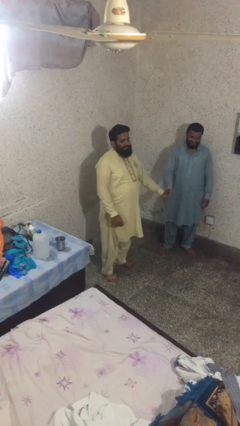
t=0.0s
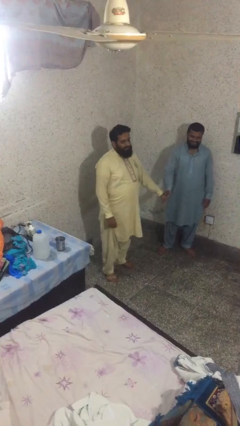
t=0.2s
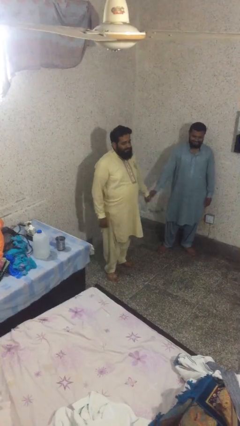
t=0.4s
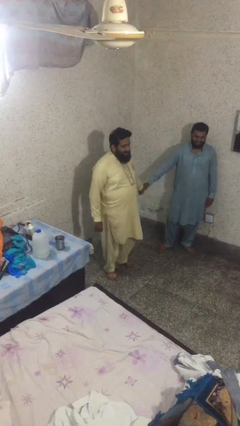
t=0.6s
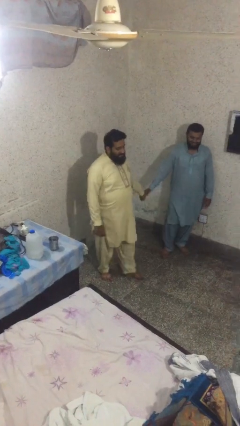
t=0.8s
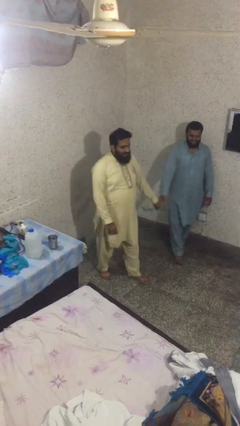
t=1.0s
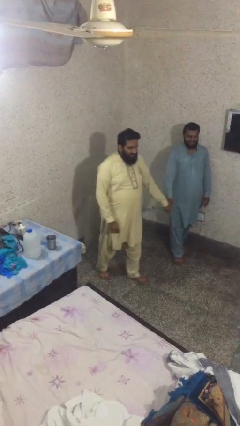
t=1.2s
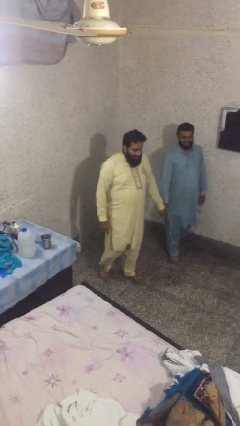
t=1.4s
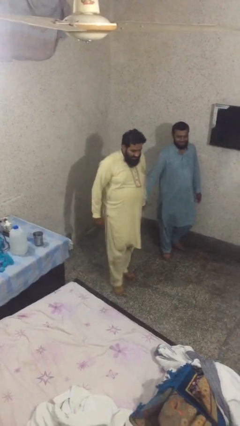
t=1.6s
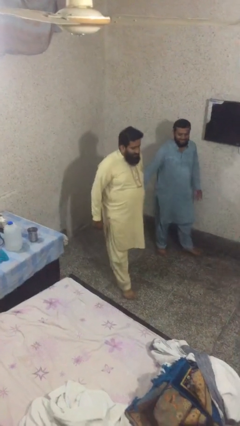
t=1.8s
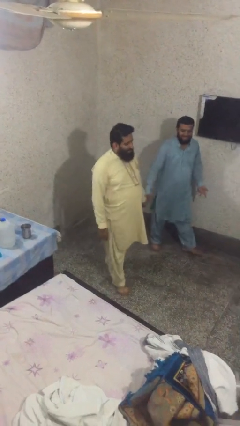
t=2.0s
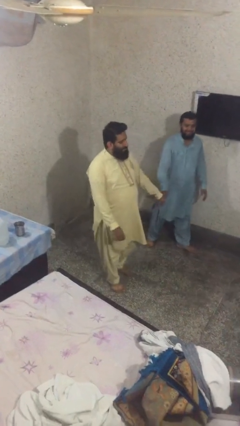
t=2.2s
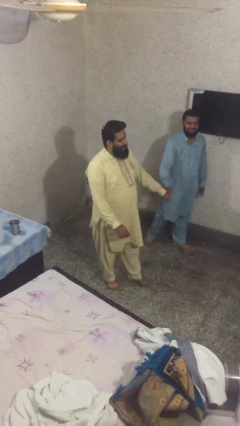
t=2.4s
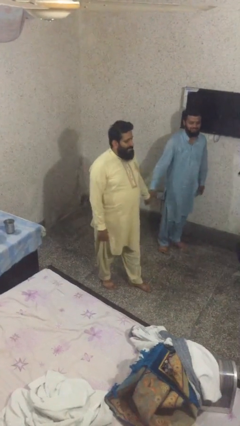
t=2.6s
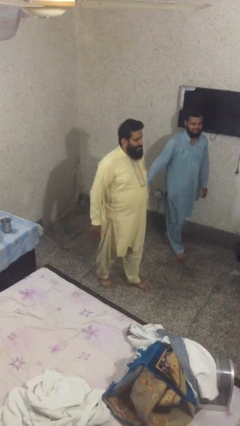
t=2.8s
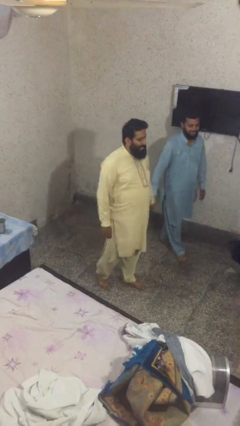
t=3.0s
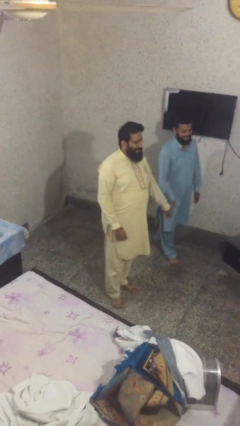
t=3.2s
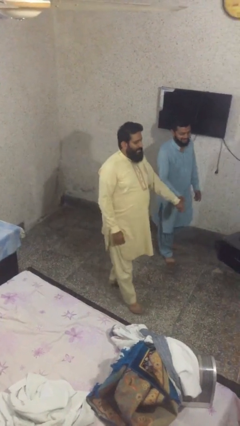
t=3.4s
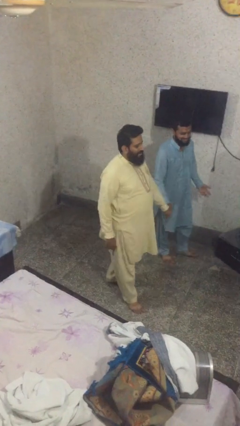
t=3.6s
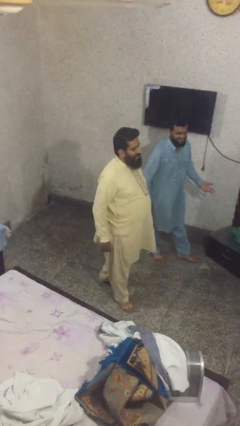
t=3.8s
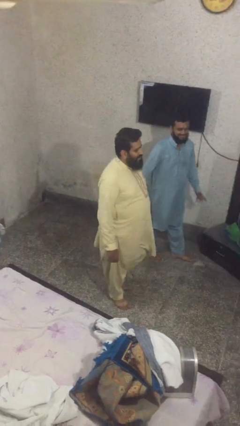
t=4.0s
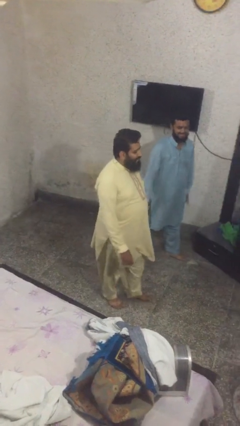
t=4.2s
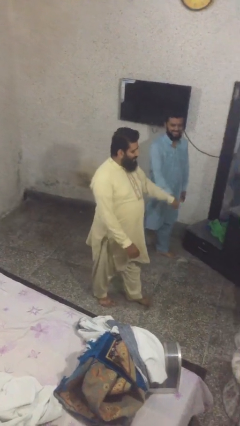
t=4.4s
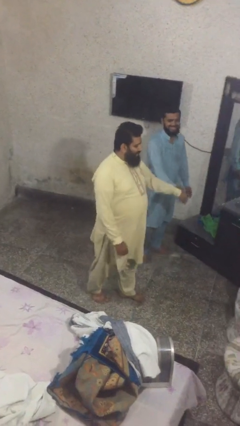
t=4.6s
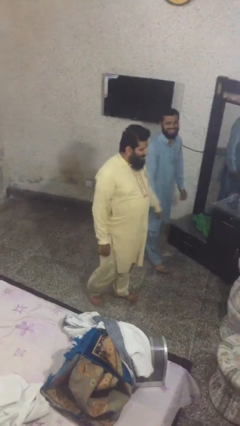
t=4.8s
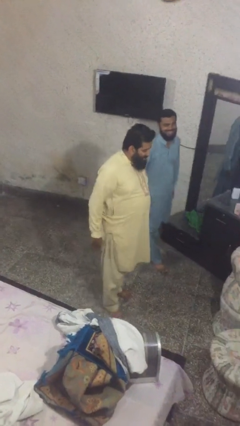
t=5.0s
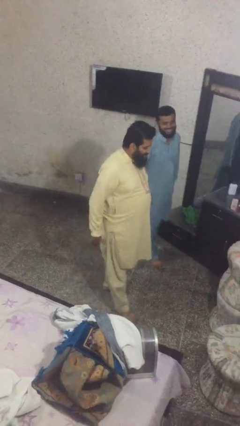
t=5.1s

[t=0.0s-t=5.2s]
person holds hand

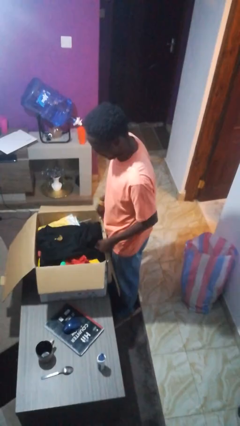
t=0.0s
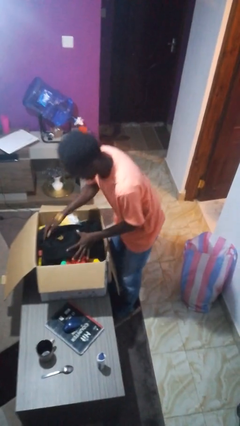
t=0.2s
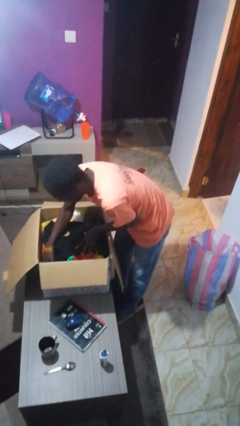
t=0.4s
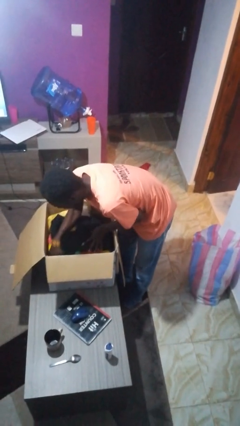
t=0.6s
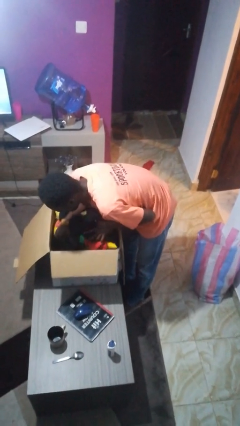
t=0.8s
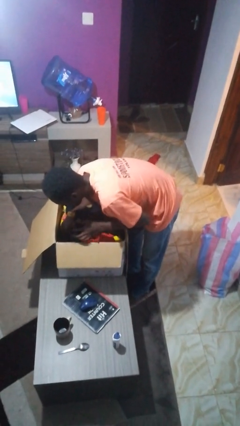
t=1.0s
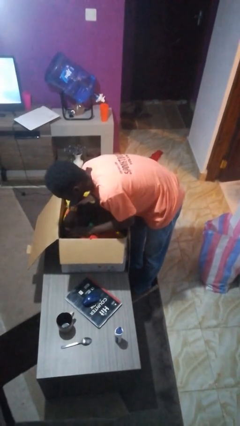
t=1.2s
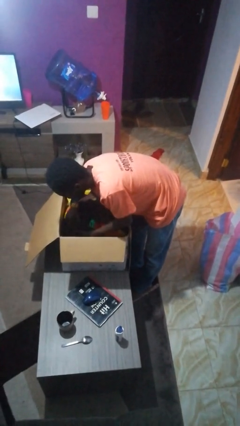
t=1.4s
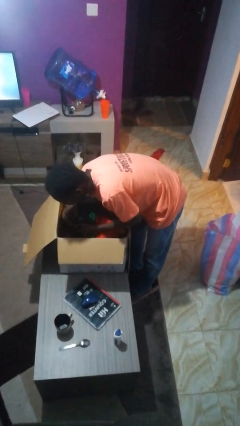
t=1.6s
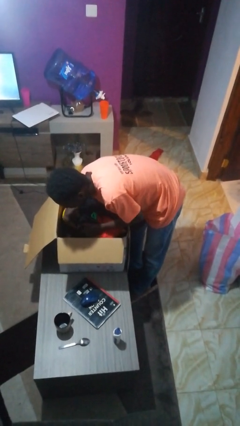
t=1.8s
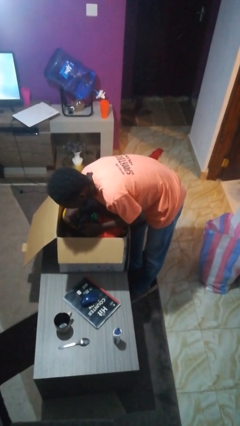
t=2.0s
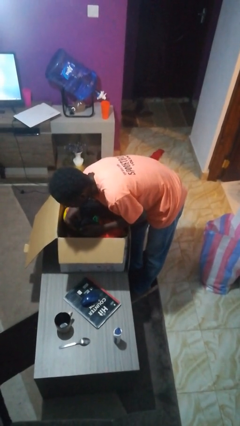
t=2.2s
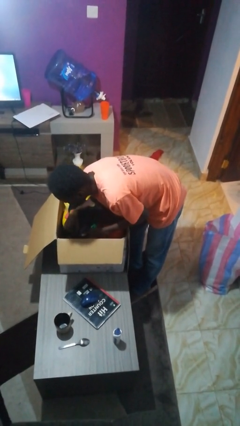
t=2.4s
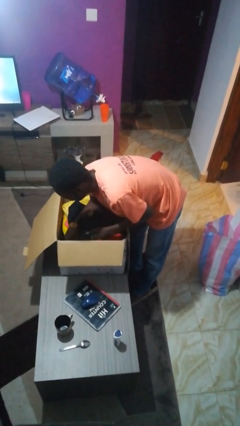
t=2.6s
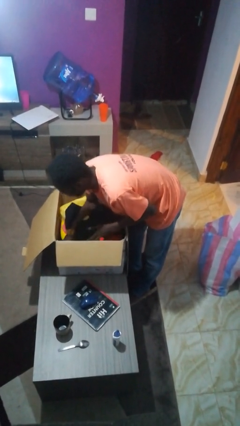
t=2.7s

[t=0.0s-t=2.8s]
person searches in box

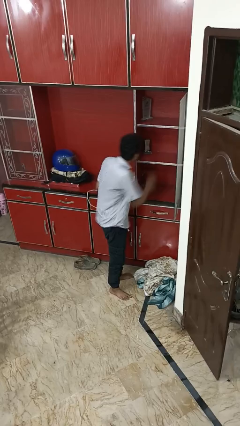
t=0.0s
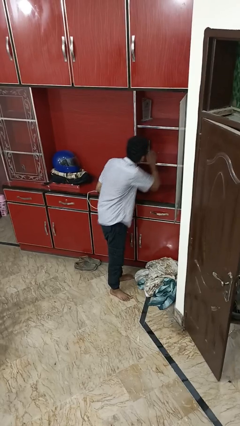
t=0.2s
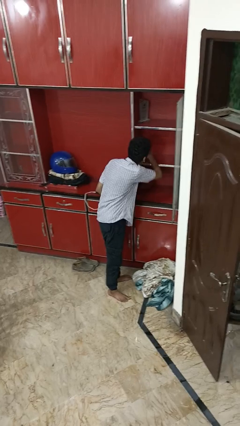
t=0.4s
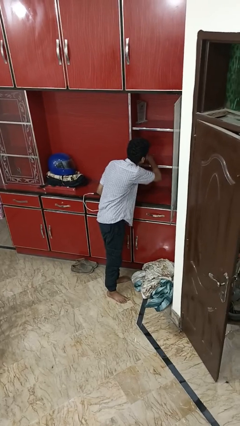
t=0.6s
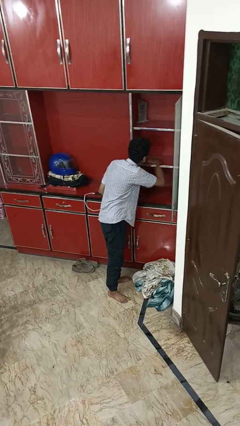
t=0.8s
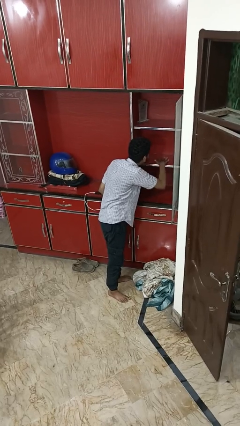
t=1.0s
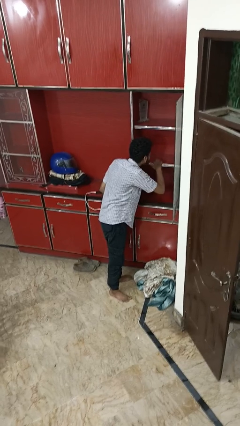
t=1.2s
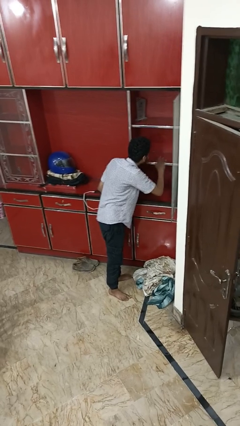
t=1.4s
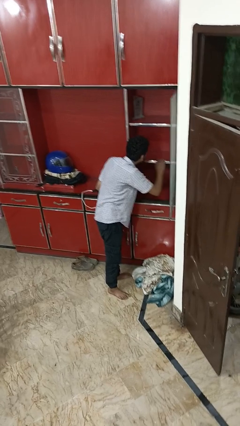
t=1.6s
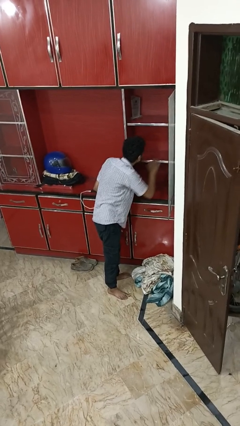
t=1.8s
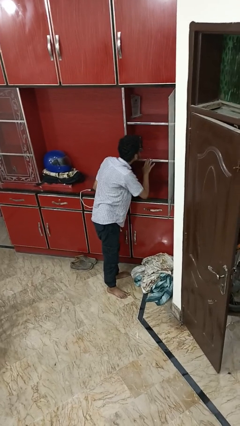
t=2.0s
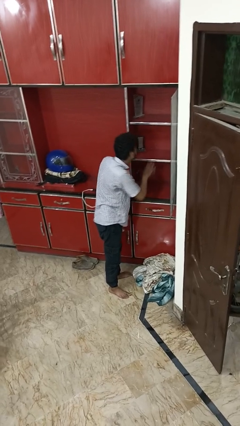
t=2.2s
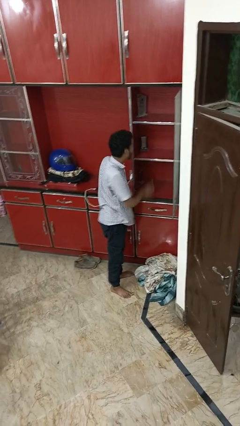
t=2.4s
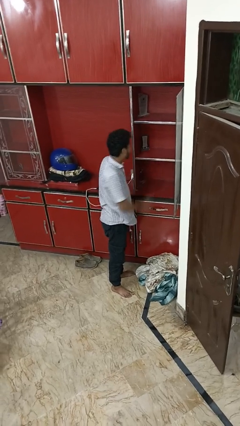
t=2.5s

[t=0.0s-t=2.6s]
person searches in cabinet

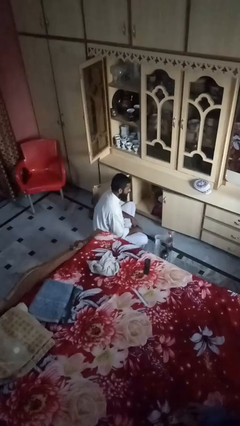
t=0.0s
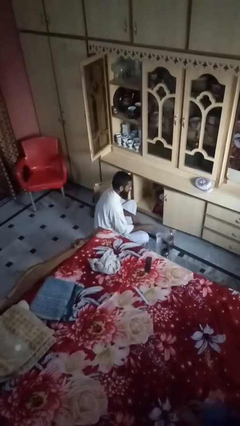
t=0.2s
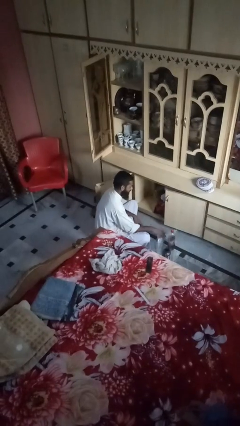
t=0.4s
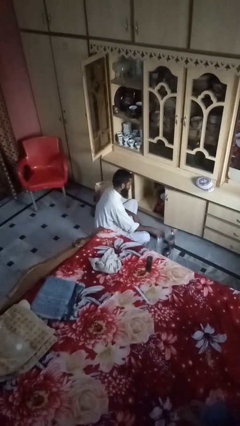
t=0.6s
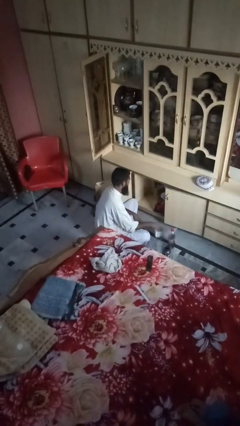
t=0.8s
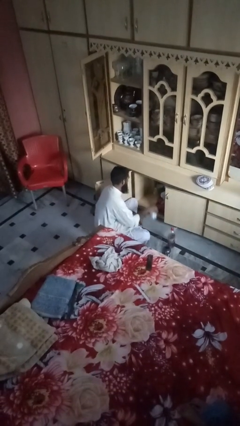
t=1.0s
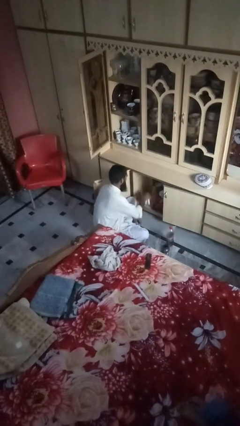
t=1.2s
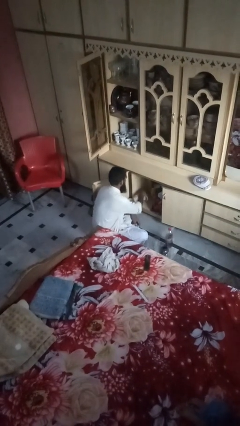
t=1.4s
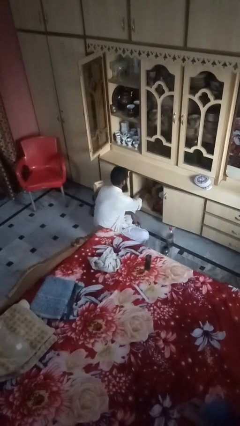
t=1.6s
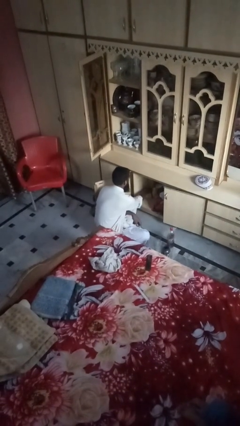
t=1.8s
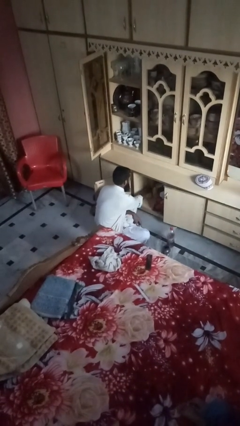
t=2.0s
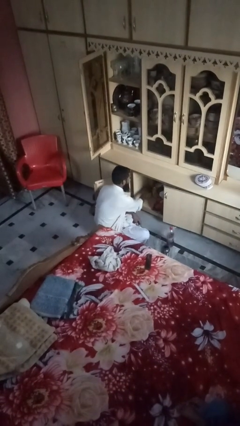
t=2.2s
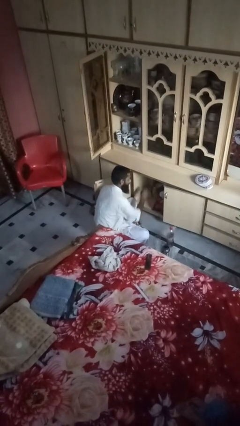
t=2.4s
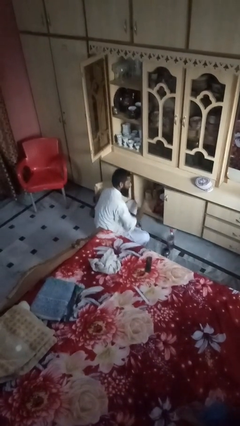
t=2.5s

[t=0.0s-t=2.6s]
person loads groceries into cabinet

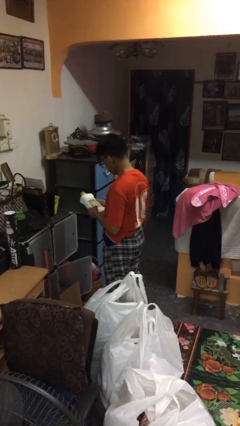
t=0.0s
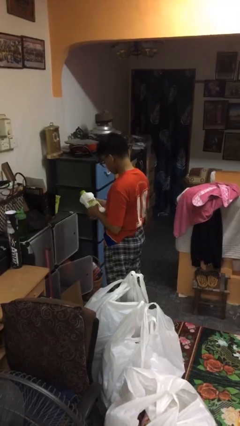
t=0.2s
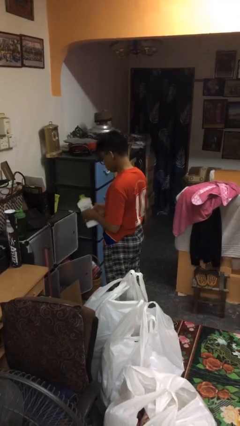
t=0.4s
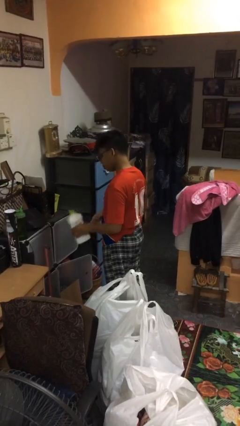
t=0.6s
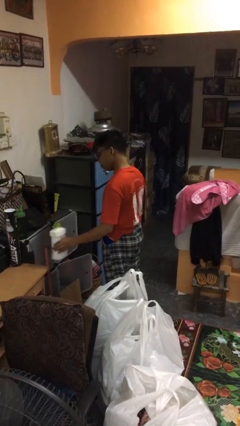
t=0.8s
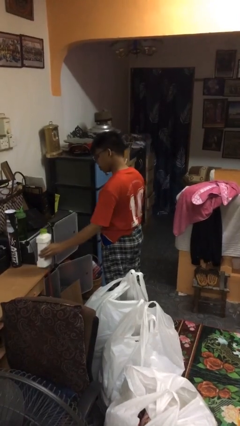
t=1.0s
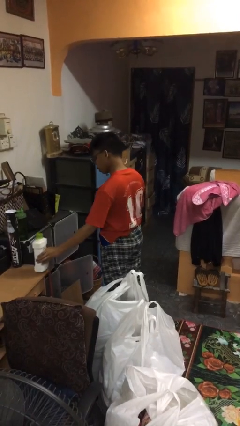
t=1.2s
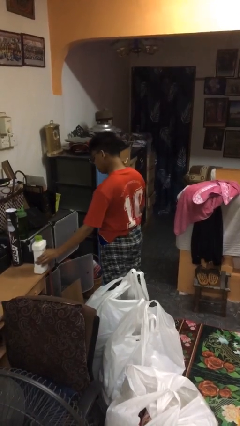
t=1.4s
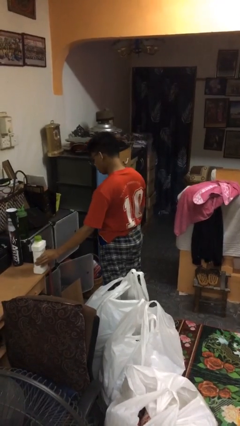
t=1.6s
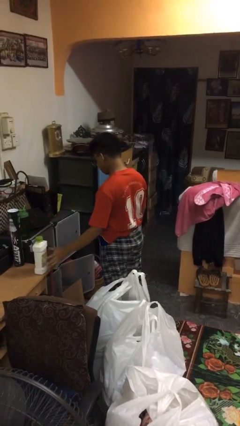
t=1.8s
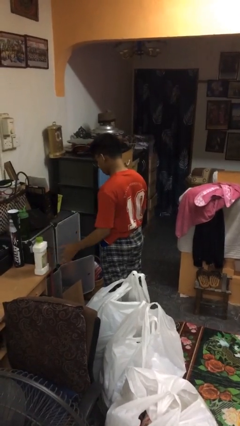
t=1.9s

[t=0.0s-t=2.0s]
person puts down object on countertop

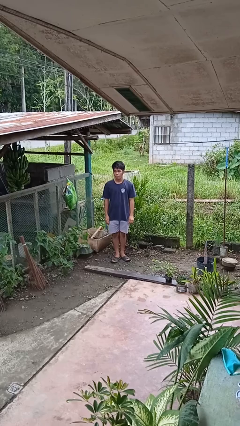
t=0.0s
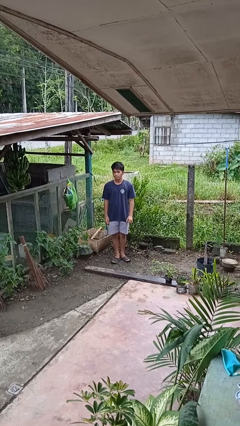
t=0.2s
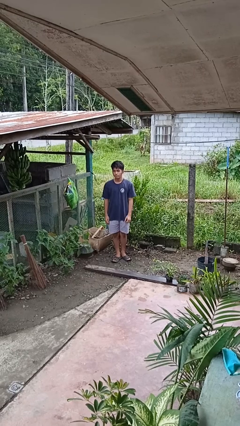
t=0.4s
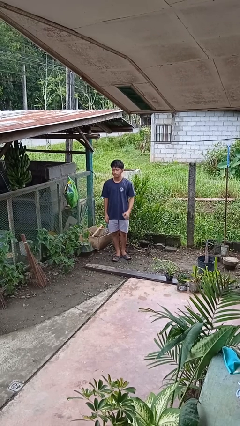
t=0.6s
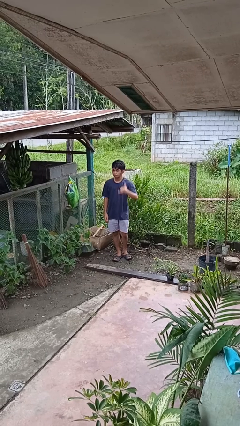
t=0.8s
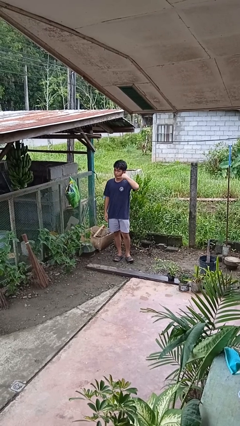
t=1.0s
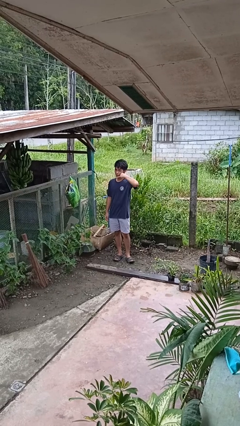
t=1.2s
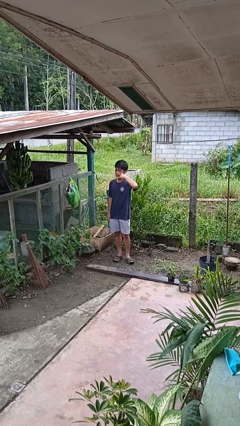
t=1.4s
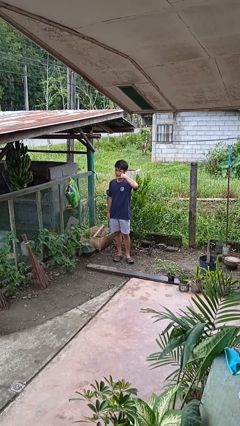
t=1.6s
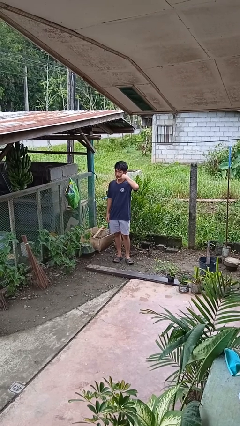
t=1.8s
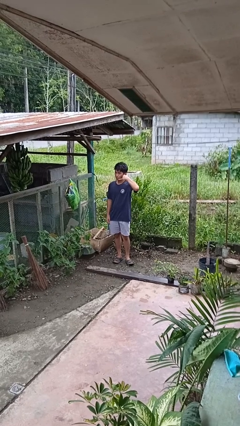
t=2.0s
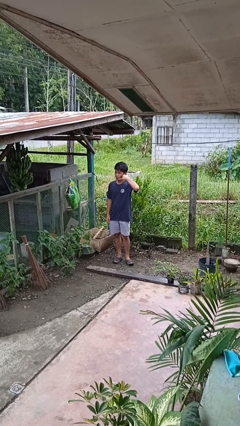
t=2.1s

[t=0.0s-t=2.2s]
person gestures call me

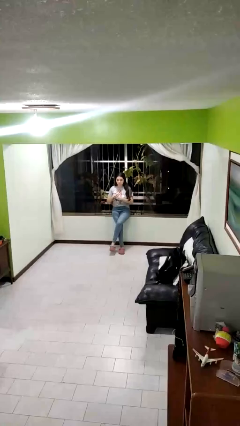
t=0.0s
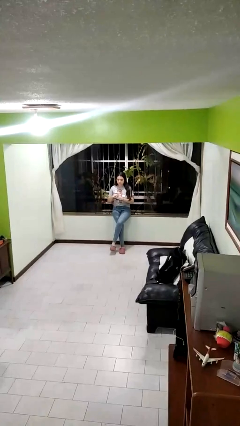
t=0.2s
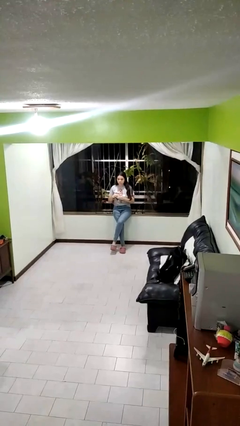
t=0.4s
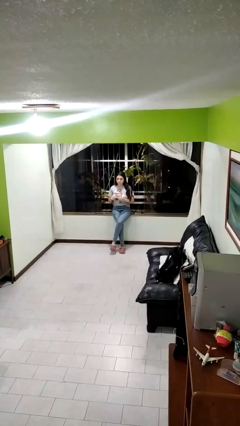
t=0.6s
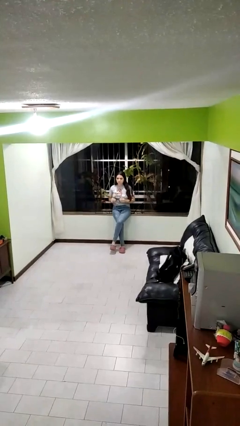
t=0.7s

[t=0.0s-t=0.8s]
person puts on ring
